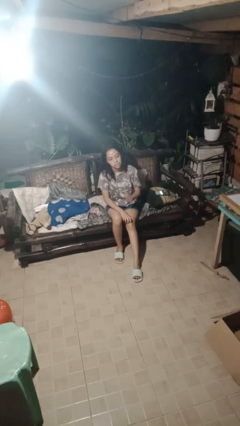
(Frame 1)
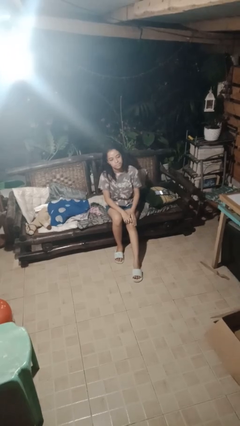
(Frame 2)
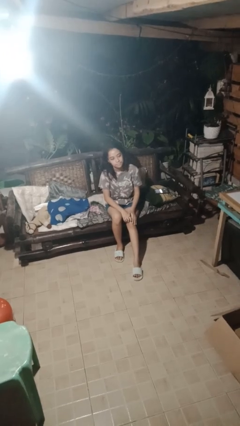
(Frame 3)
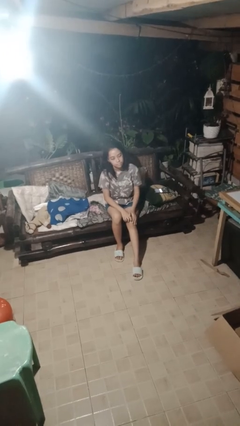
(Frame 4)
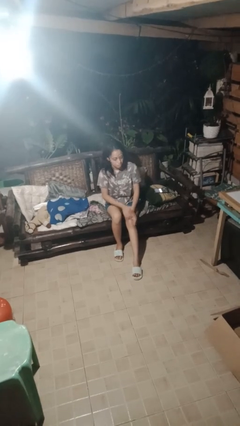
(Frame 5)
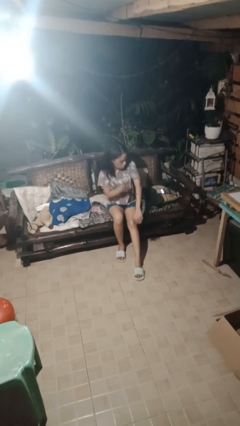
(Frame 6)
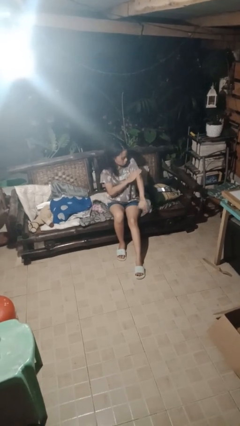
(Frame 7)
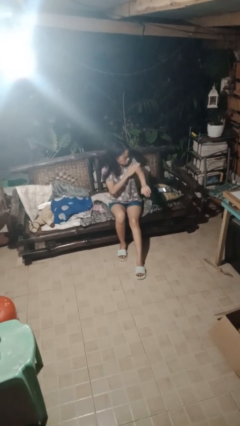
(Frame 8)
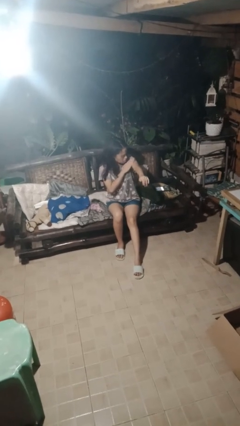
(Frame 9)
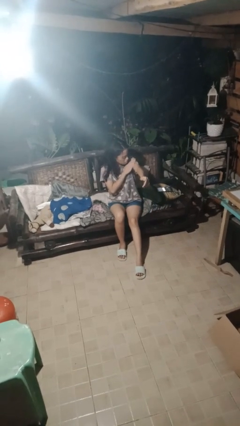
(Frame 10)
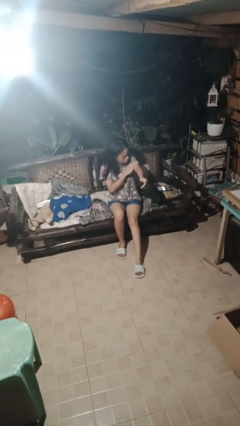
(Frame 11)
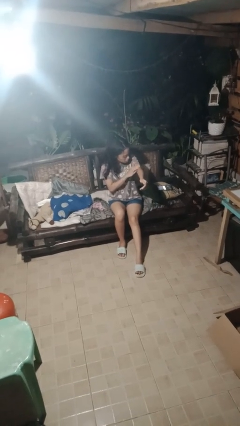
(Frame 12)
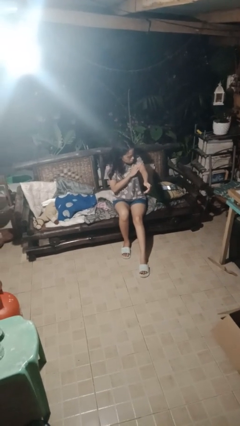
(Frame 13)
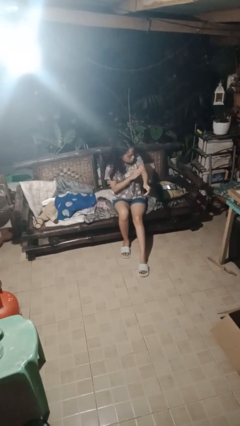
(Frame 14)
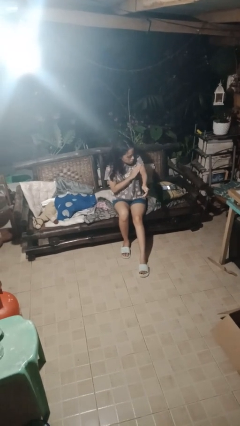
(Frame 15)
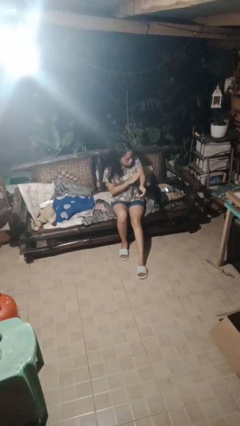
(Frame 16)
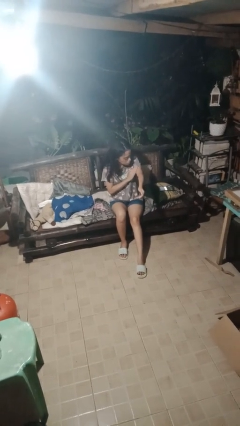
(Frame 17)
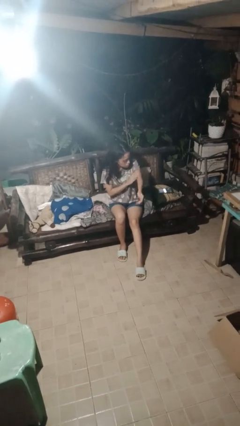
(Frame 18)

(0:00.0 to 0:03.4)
person swats bug

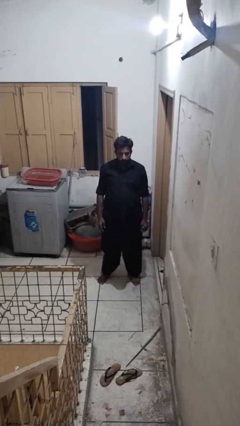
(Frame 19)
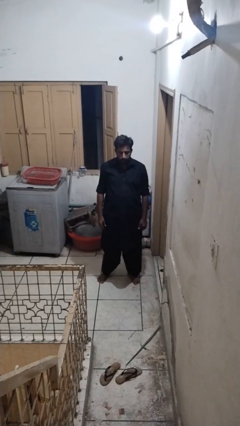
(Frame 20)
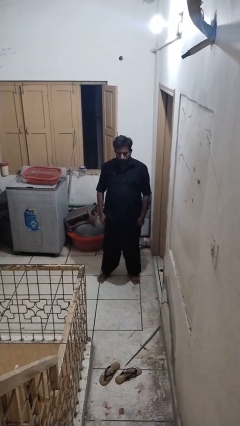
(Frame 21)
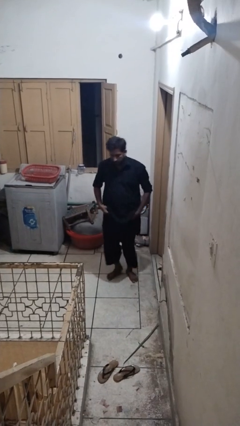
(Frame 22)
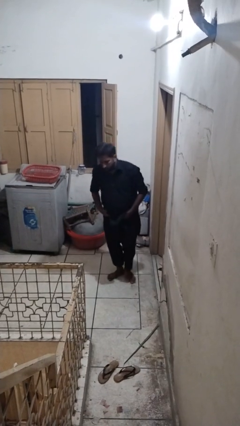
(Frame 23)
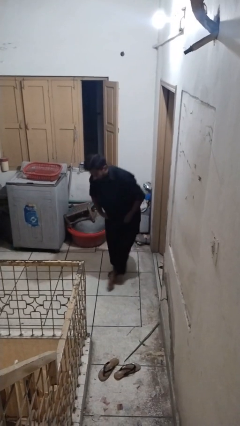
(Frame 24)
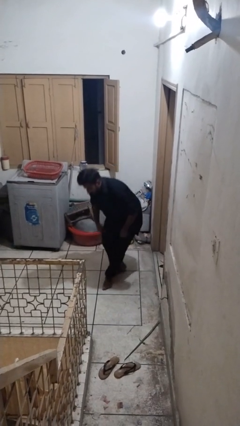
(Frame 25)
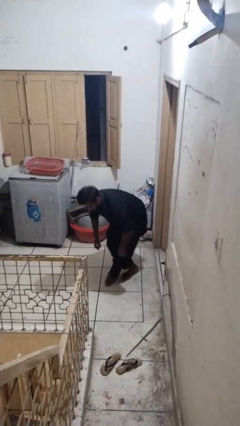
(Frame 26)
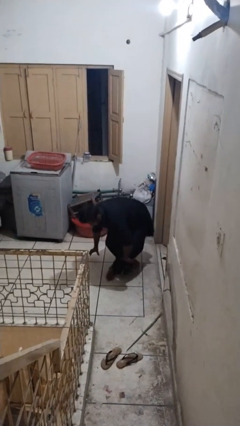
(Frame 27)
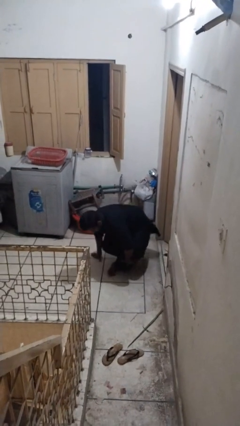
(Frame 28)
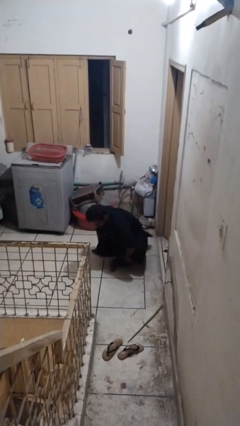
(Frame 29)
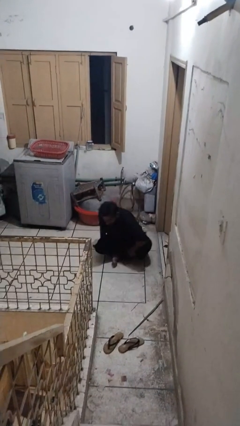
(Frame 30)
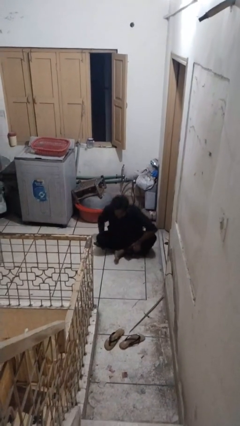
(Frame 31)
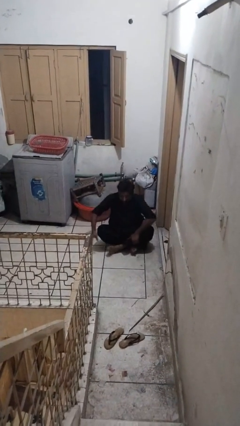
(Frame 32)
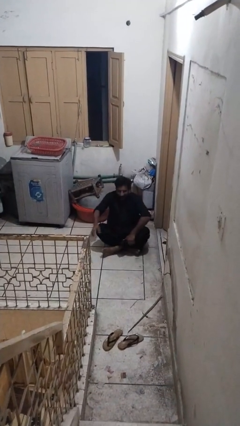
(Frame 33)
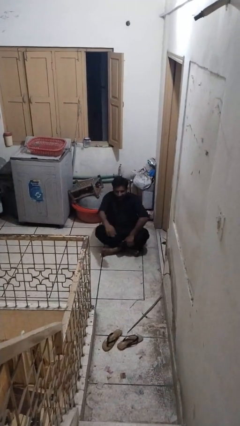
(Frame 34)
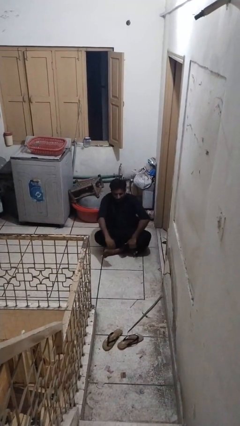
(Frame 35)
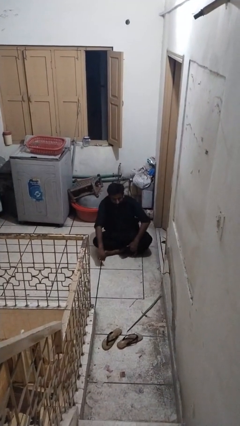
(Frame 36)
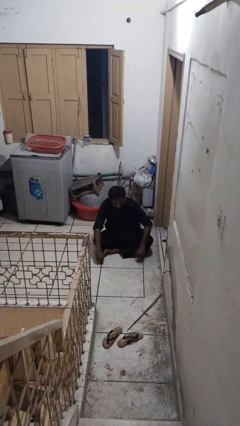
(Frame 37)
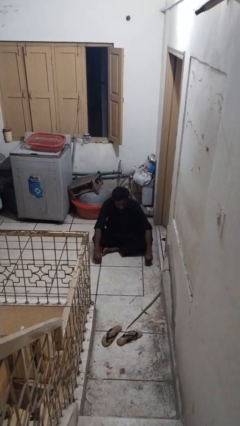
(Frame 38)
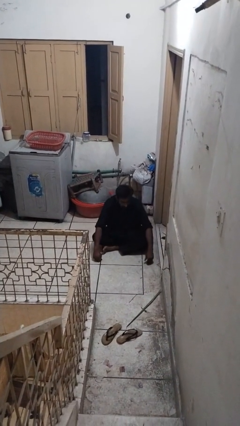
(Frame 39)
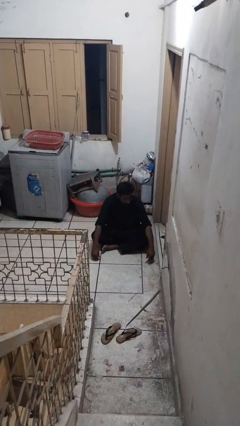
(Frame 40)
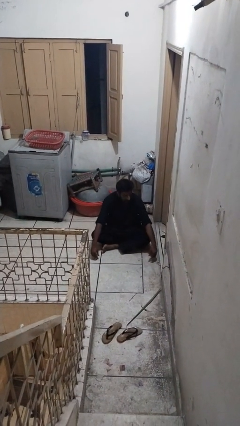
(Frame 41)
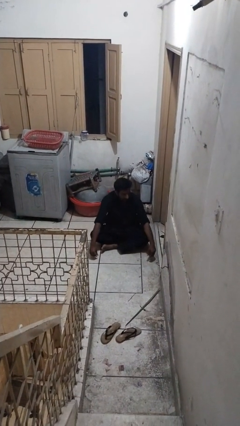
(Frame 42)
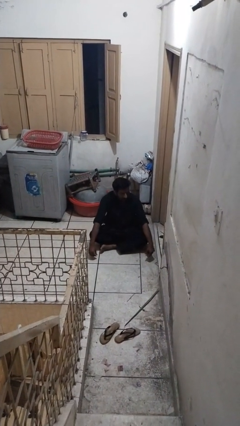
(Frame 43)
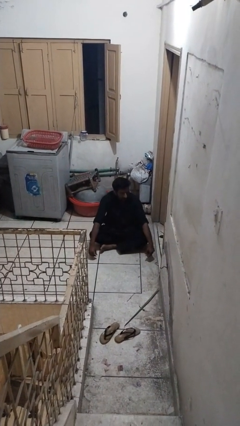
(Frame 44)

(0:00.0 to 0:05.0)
person sits crisscross
